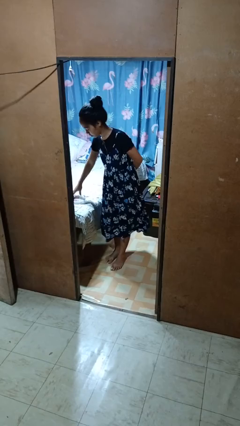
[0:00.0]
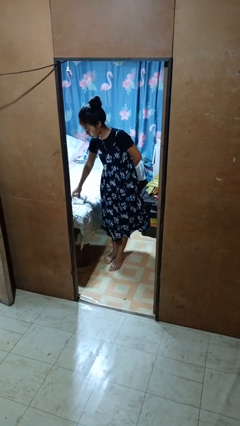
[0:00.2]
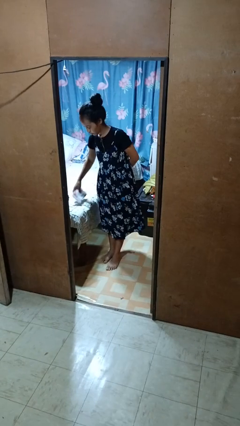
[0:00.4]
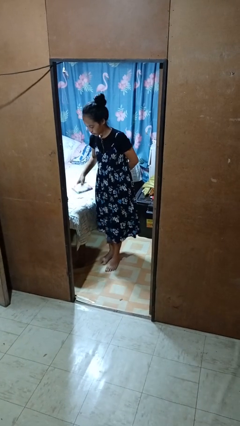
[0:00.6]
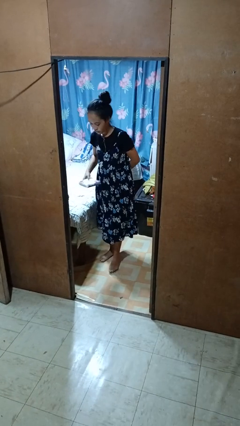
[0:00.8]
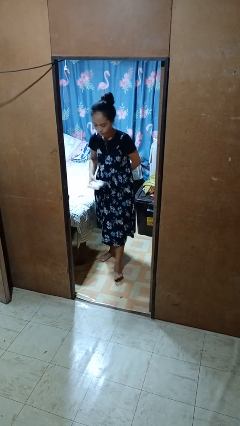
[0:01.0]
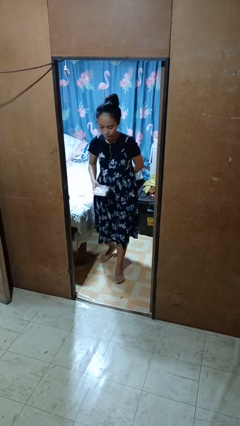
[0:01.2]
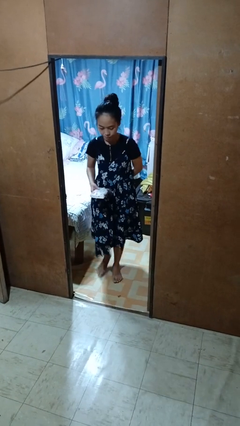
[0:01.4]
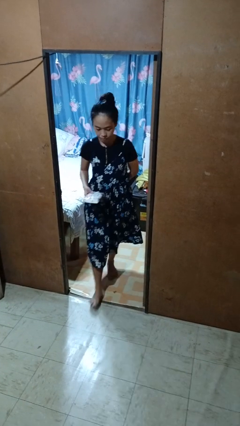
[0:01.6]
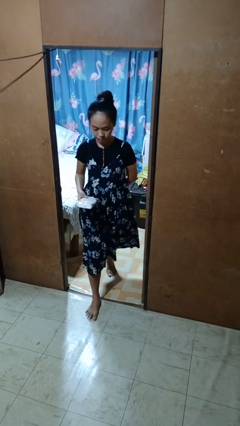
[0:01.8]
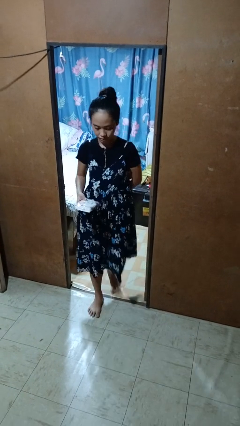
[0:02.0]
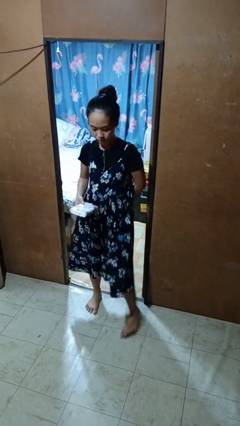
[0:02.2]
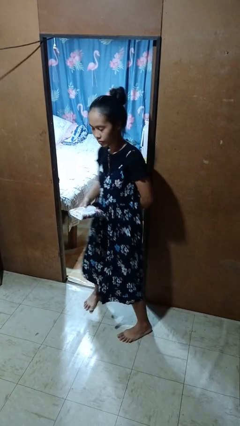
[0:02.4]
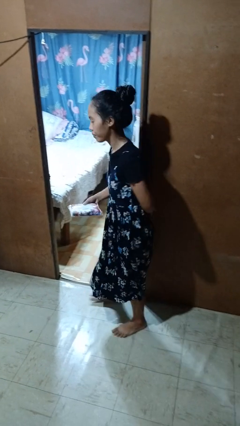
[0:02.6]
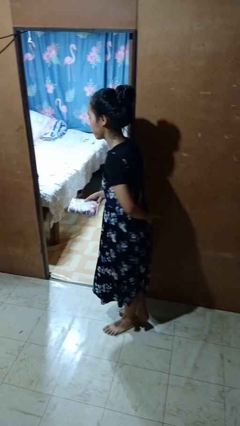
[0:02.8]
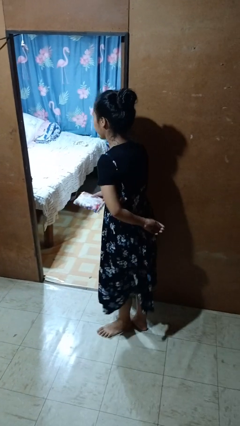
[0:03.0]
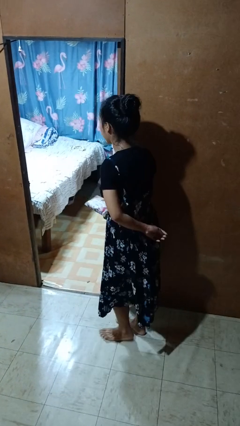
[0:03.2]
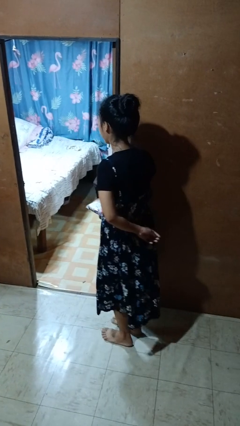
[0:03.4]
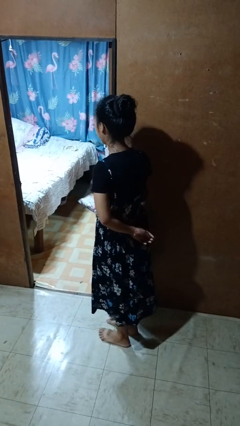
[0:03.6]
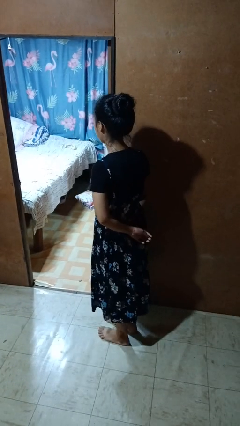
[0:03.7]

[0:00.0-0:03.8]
person picks up object from bed

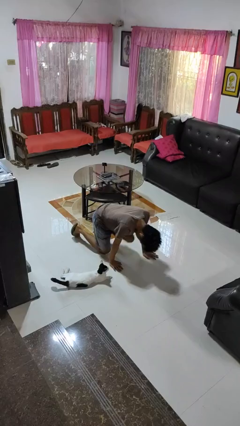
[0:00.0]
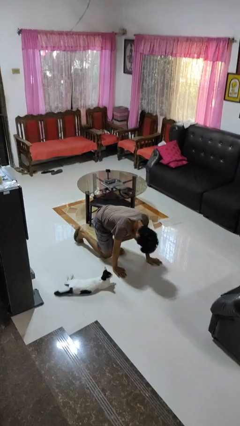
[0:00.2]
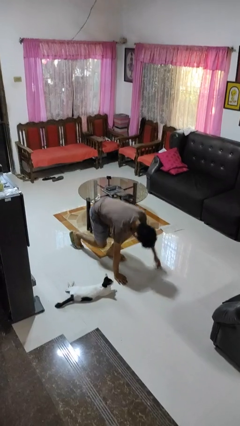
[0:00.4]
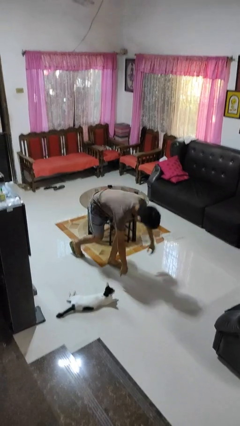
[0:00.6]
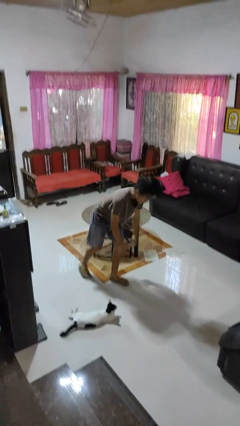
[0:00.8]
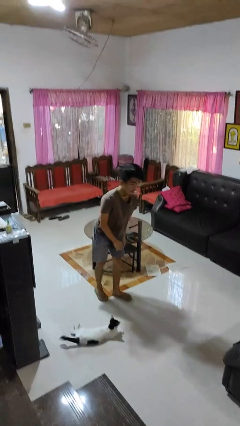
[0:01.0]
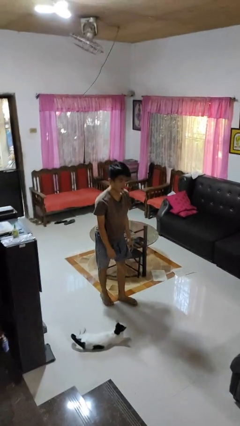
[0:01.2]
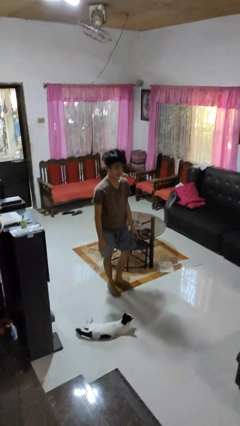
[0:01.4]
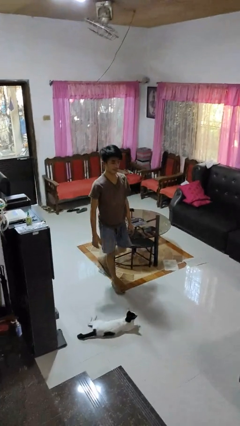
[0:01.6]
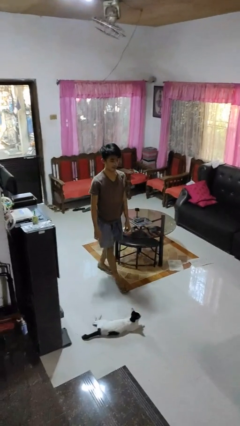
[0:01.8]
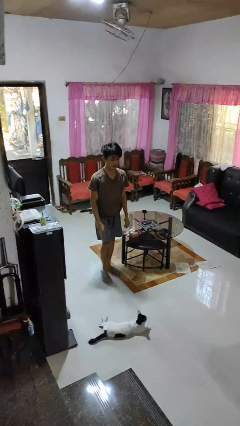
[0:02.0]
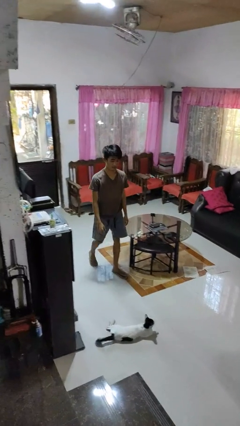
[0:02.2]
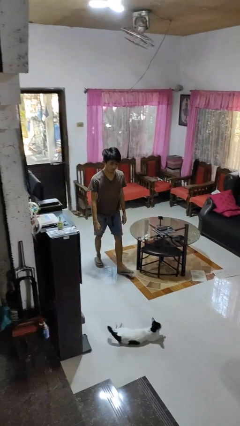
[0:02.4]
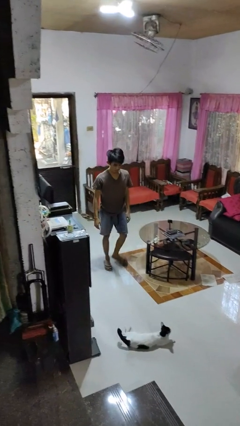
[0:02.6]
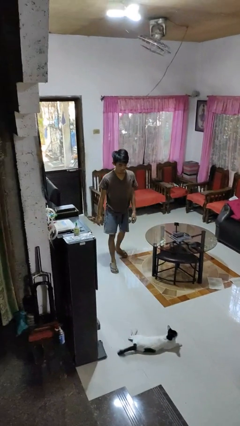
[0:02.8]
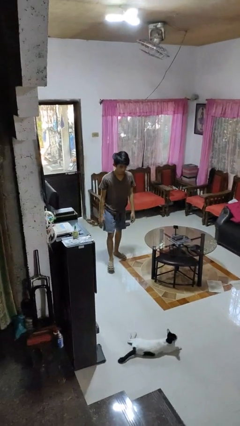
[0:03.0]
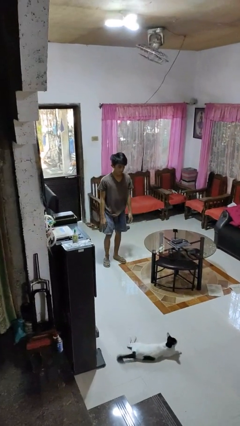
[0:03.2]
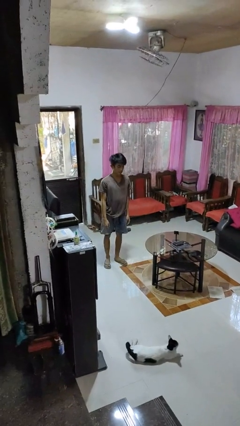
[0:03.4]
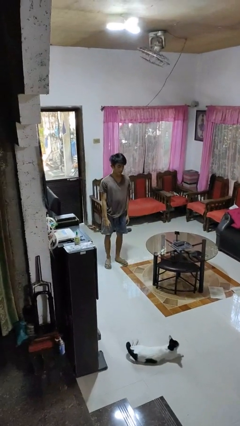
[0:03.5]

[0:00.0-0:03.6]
person stands up from floor

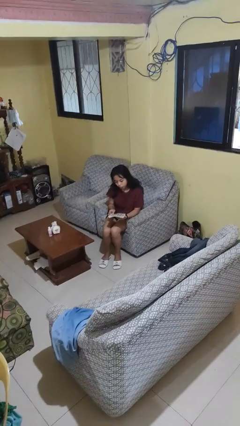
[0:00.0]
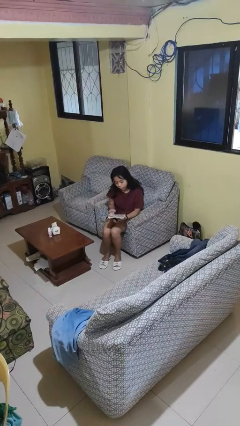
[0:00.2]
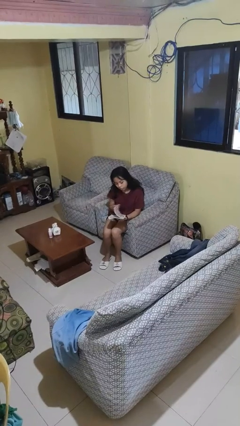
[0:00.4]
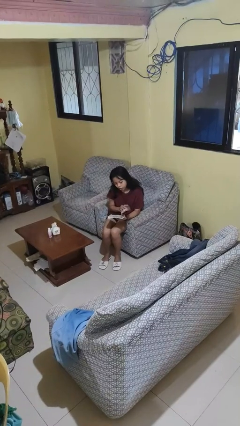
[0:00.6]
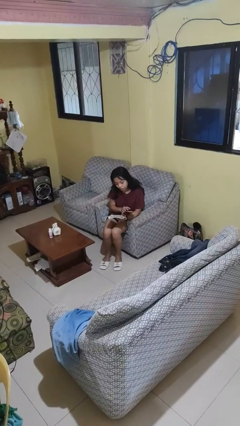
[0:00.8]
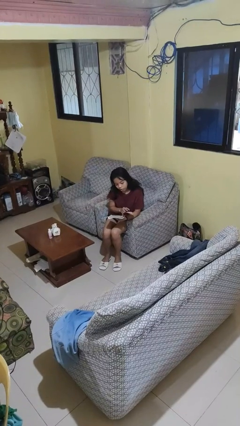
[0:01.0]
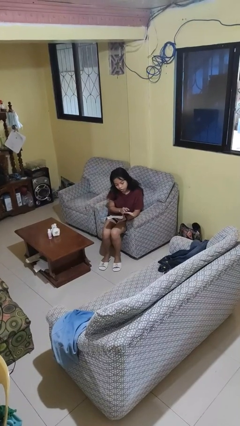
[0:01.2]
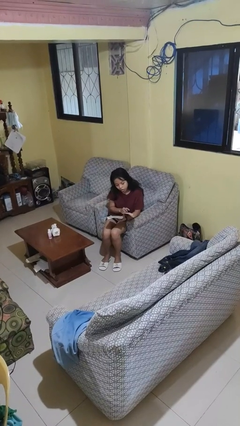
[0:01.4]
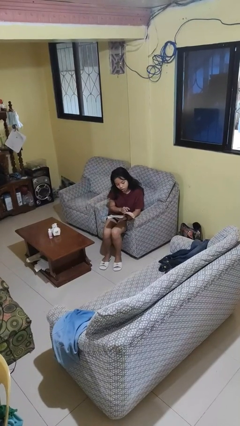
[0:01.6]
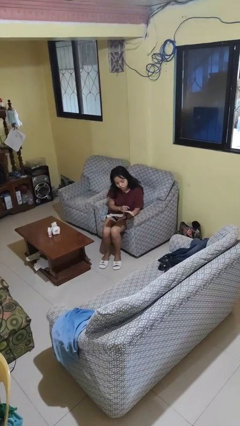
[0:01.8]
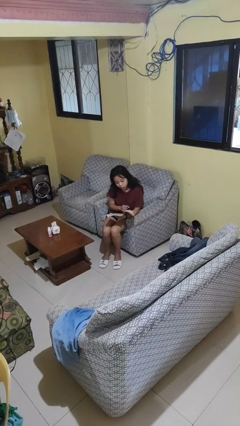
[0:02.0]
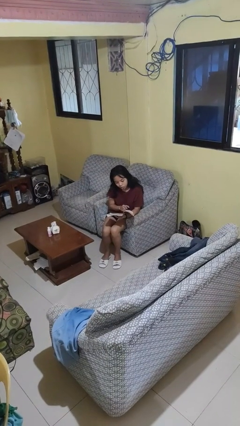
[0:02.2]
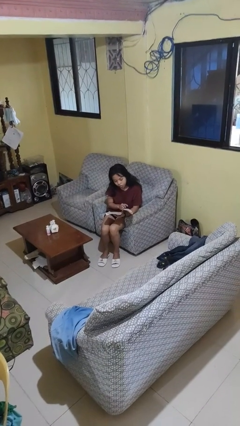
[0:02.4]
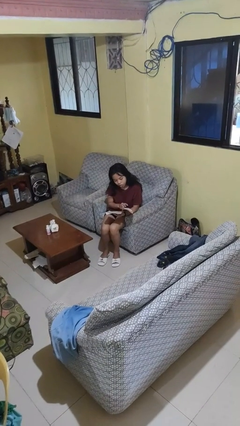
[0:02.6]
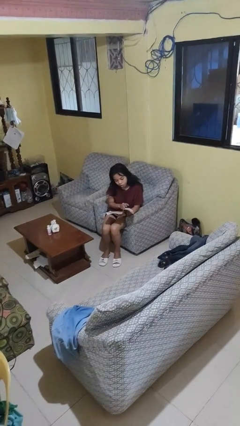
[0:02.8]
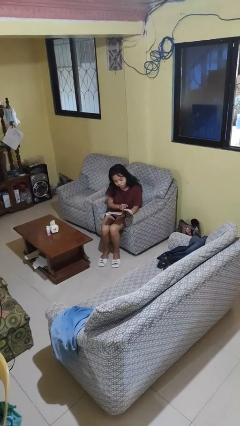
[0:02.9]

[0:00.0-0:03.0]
person reads magazine

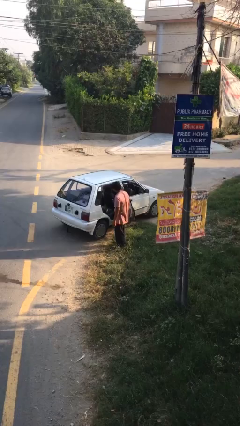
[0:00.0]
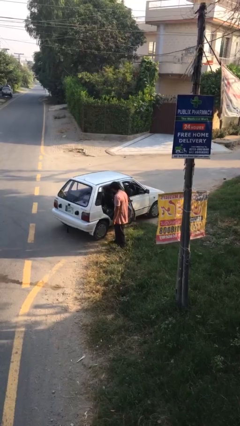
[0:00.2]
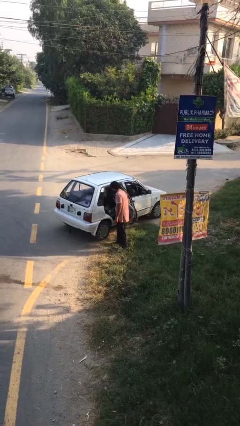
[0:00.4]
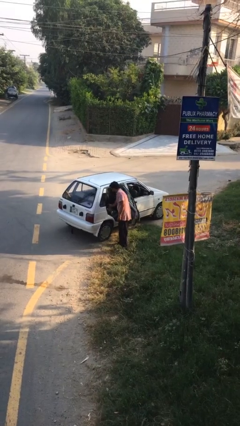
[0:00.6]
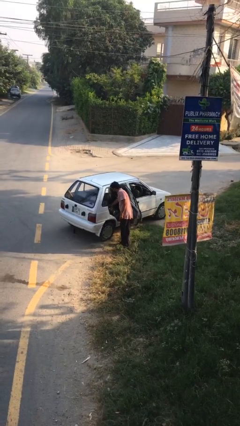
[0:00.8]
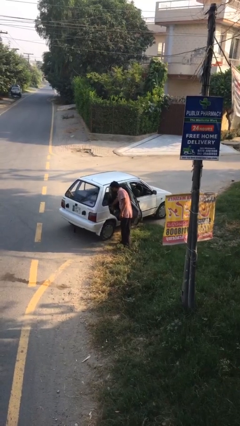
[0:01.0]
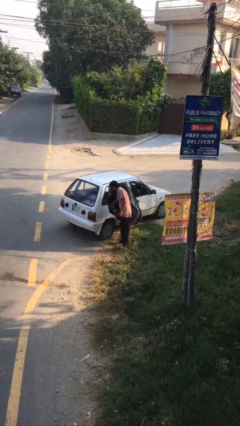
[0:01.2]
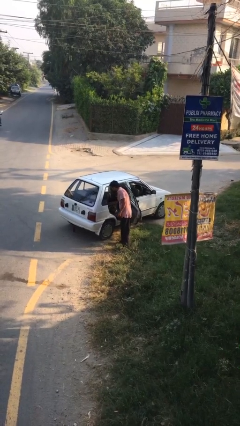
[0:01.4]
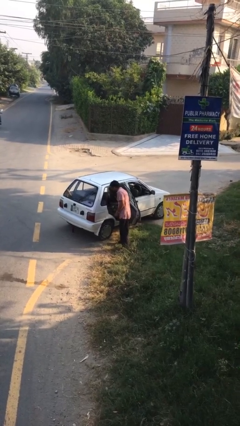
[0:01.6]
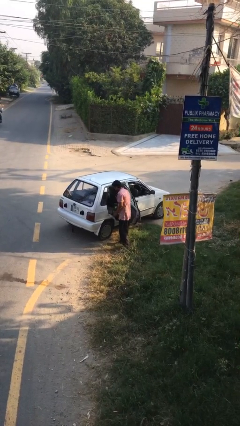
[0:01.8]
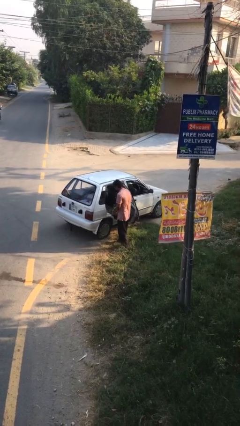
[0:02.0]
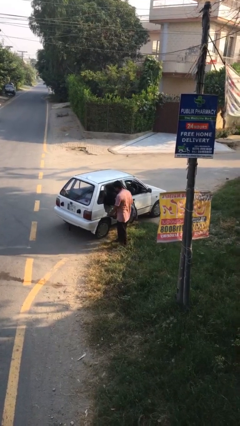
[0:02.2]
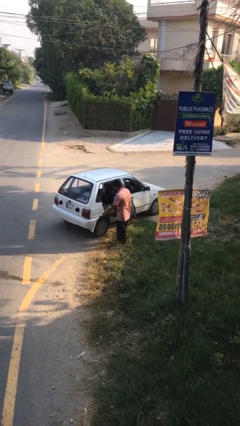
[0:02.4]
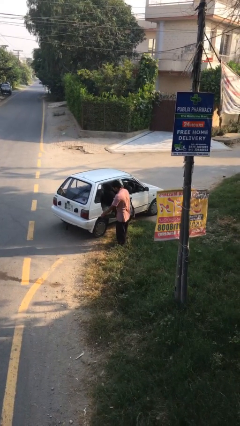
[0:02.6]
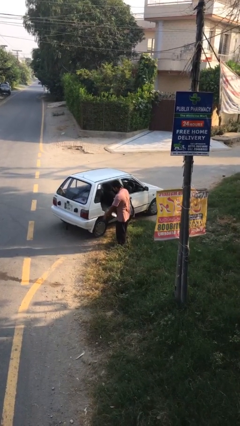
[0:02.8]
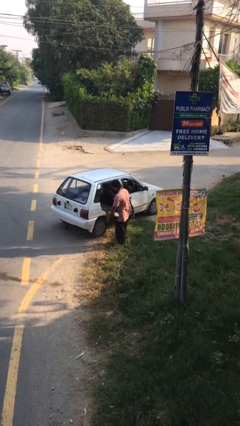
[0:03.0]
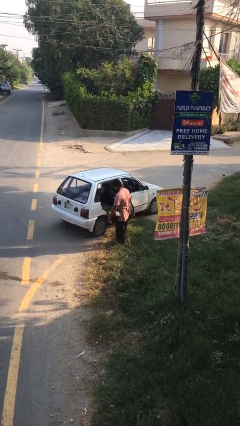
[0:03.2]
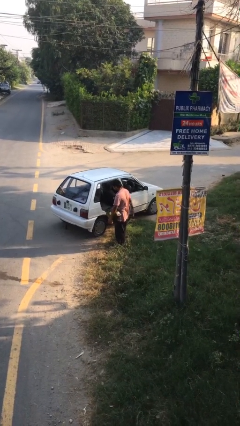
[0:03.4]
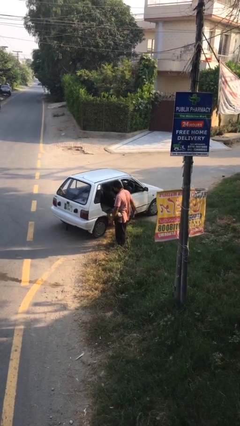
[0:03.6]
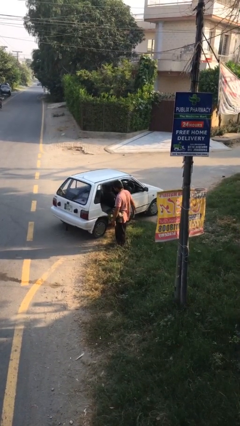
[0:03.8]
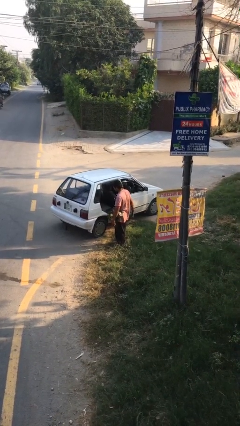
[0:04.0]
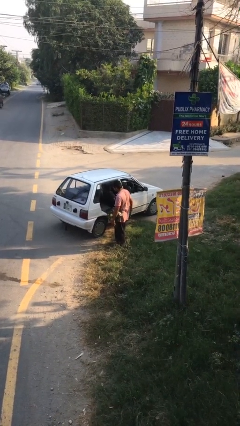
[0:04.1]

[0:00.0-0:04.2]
person unloads car

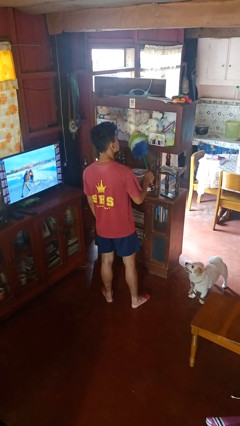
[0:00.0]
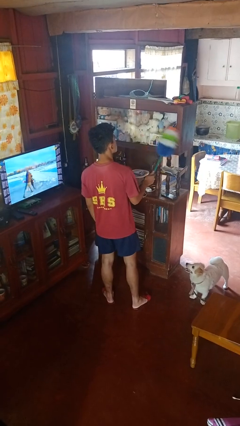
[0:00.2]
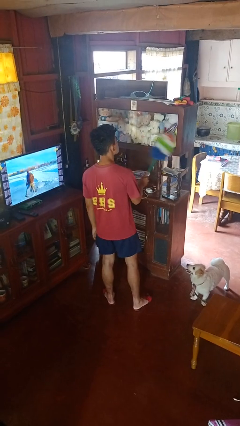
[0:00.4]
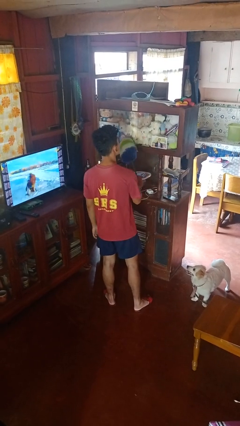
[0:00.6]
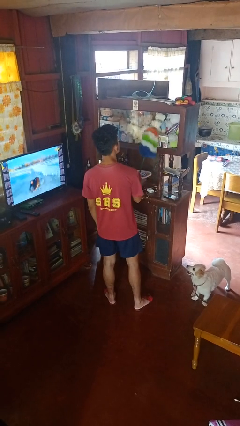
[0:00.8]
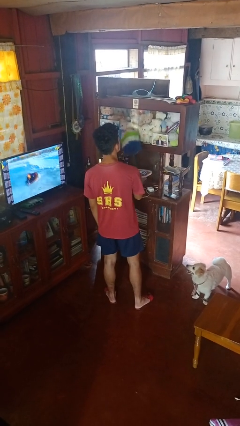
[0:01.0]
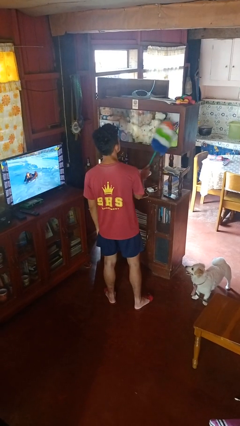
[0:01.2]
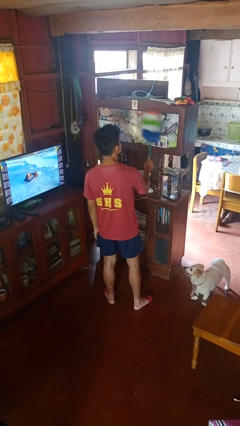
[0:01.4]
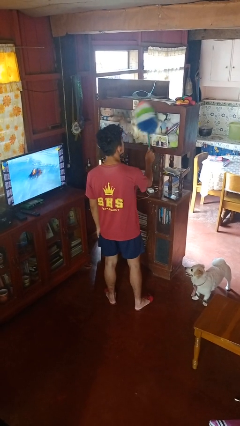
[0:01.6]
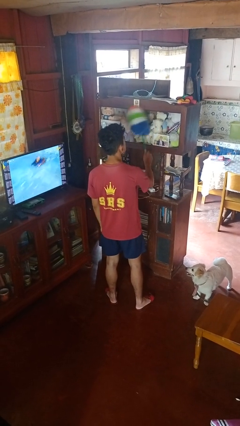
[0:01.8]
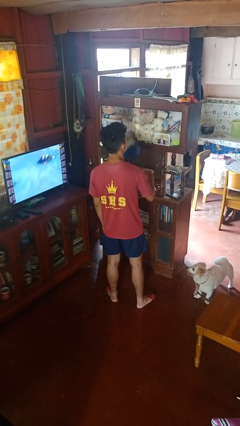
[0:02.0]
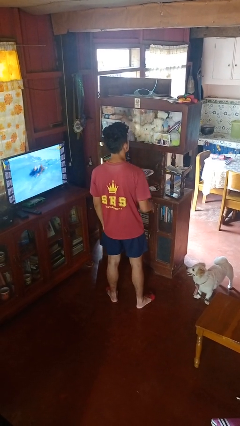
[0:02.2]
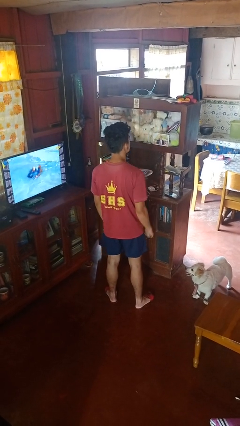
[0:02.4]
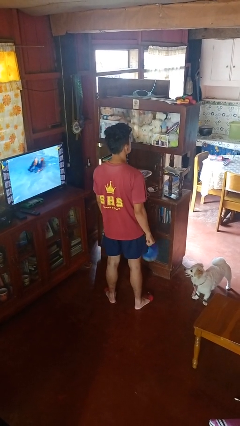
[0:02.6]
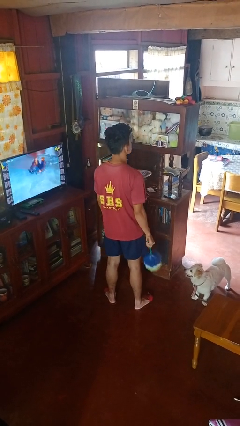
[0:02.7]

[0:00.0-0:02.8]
person dusts furniture
